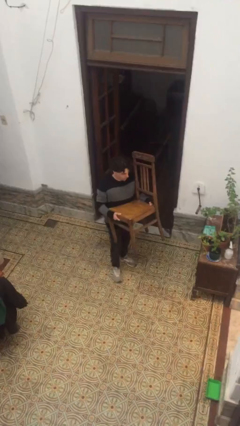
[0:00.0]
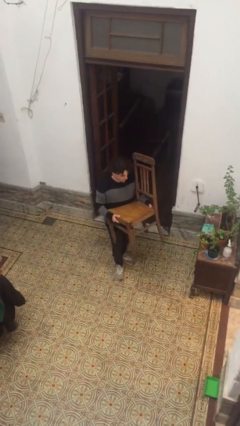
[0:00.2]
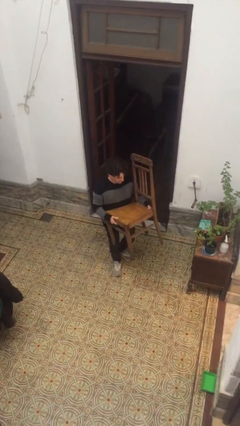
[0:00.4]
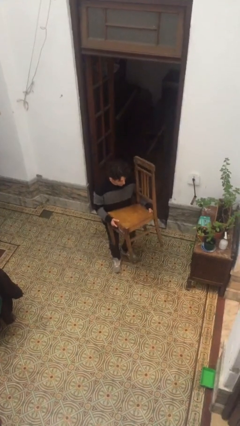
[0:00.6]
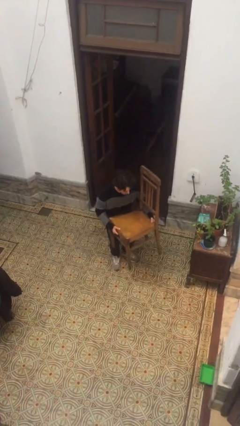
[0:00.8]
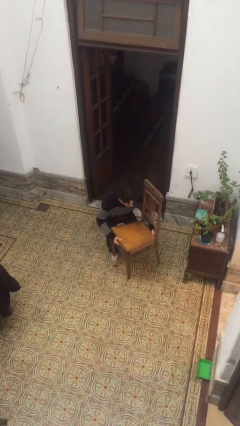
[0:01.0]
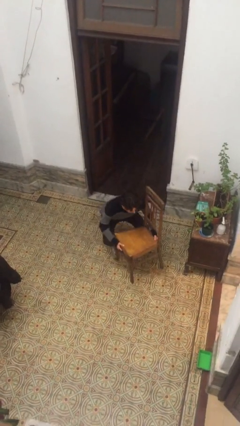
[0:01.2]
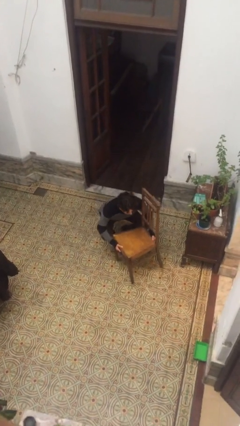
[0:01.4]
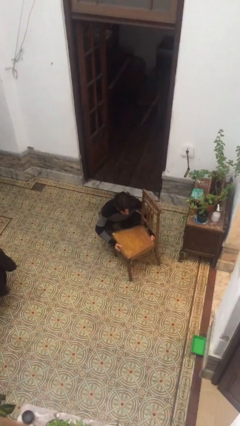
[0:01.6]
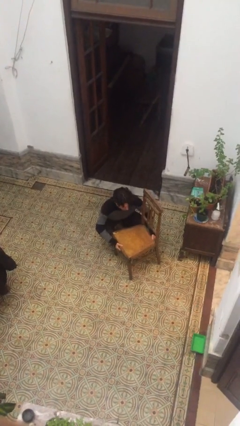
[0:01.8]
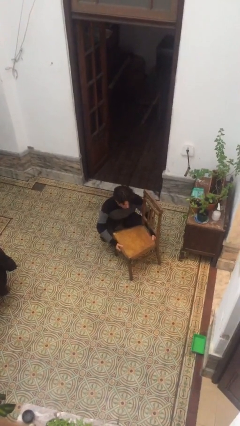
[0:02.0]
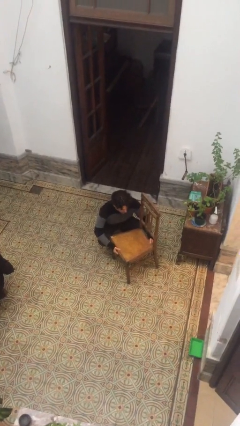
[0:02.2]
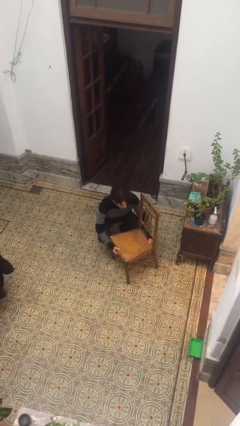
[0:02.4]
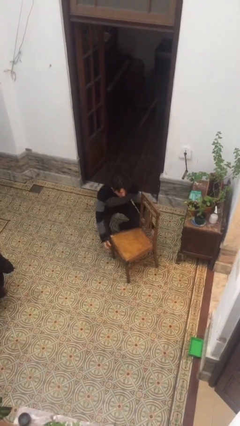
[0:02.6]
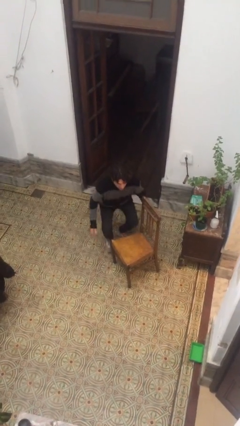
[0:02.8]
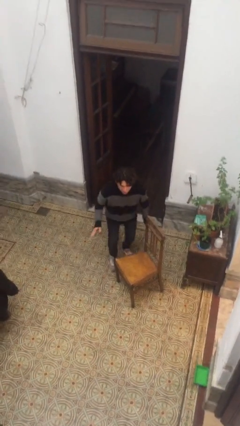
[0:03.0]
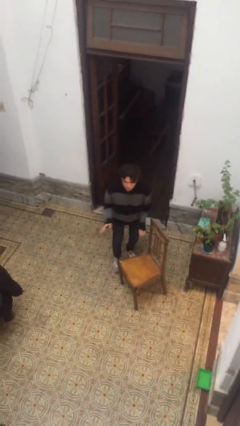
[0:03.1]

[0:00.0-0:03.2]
person puts down object on floor

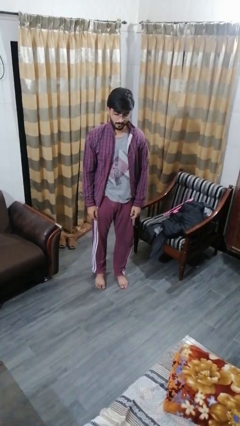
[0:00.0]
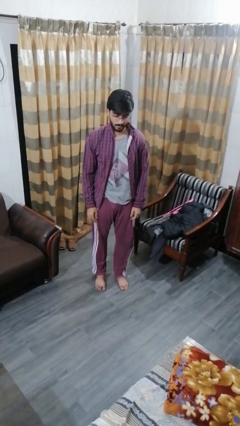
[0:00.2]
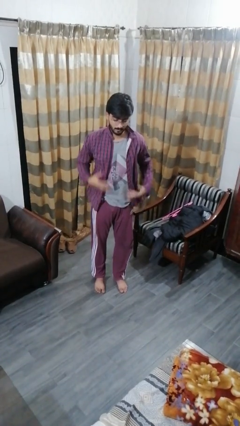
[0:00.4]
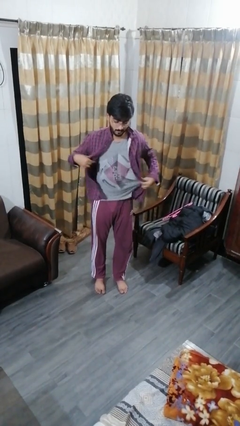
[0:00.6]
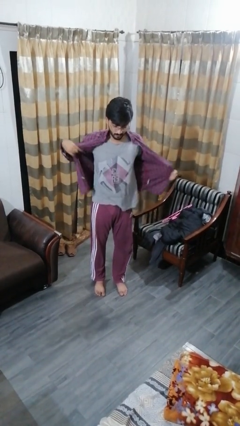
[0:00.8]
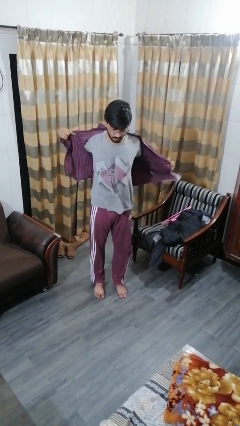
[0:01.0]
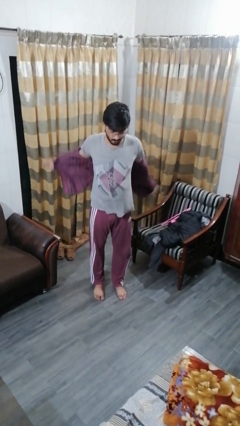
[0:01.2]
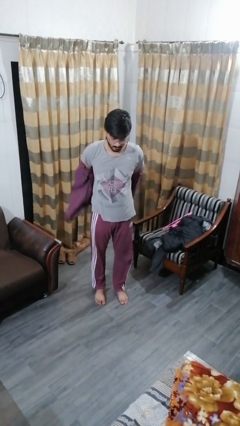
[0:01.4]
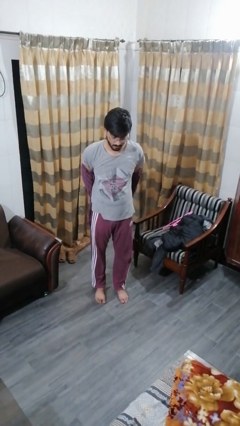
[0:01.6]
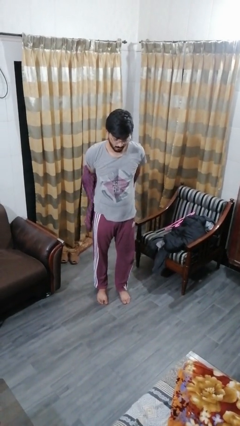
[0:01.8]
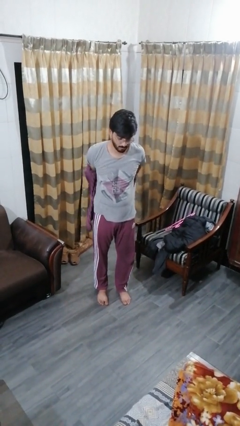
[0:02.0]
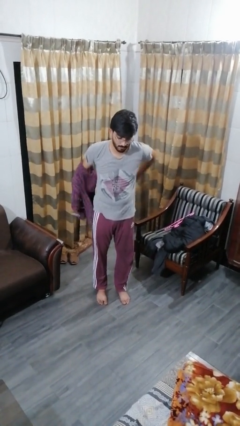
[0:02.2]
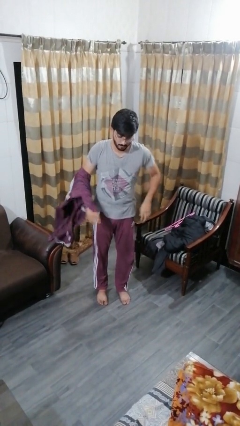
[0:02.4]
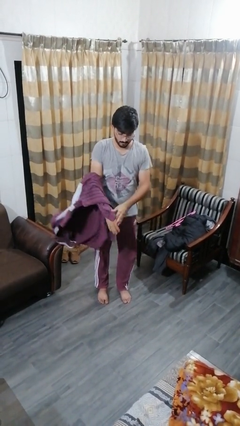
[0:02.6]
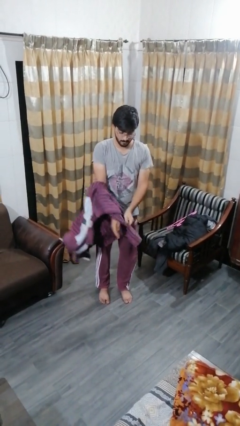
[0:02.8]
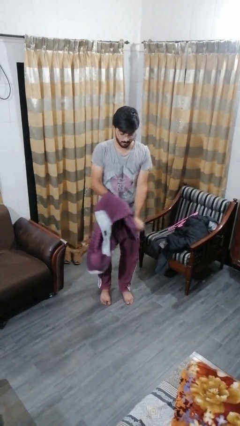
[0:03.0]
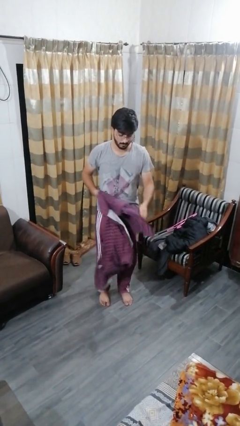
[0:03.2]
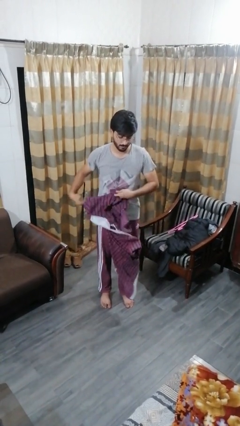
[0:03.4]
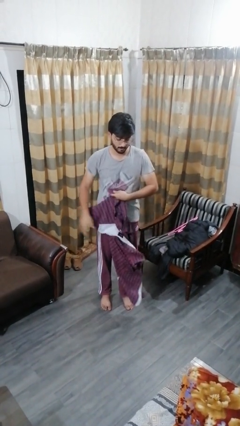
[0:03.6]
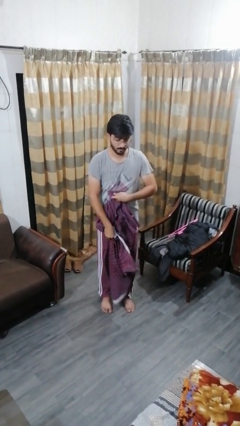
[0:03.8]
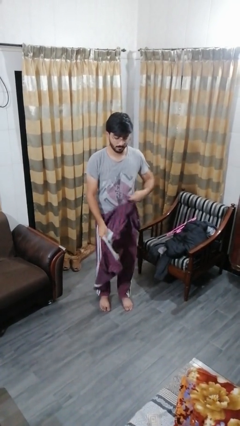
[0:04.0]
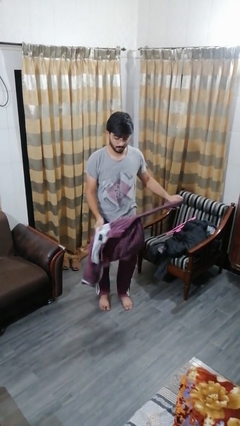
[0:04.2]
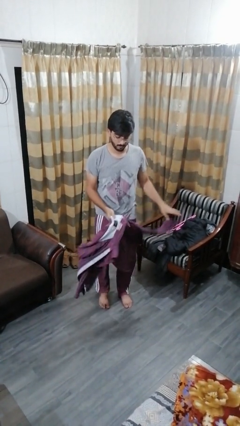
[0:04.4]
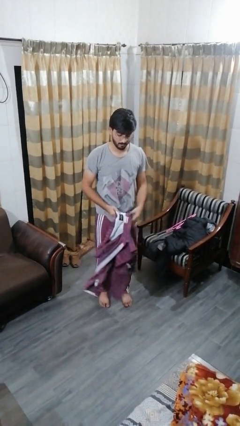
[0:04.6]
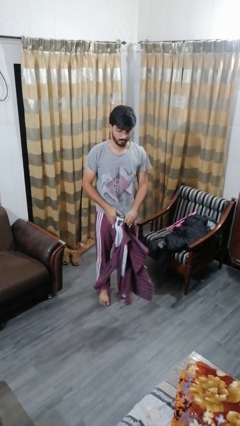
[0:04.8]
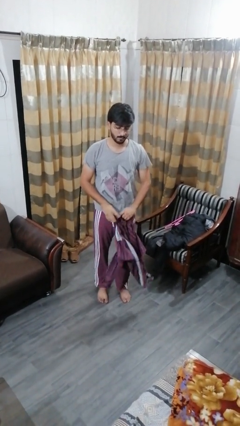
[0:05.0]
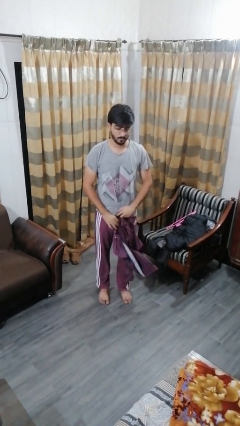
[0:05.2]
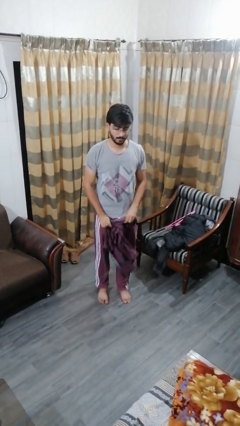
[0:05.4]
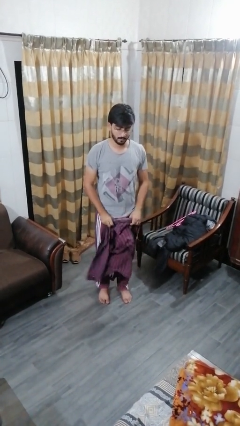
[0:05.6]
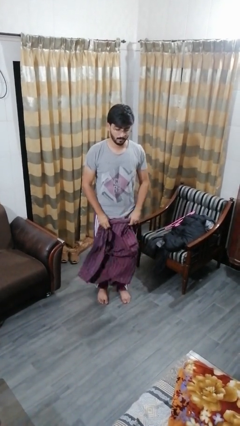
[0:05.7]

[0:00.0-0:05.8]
person takes off shirt

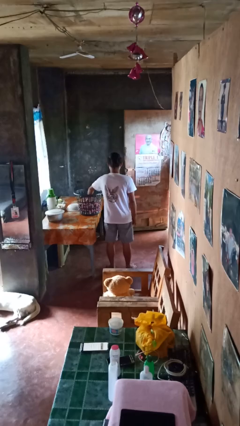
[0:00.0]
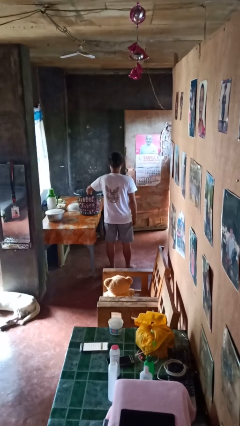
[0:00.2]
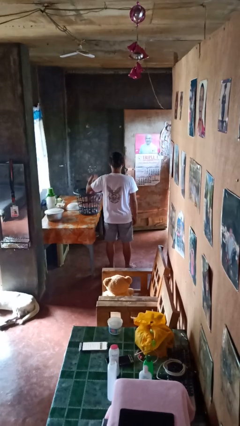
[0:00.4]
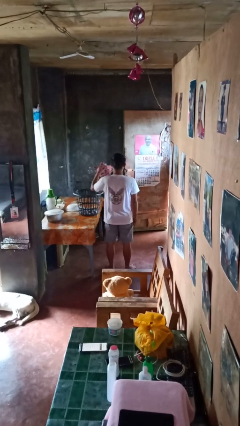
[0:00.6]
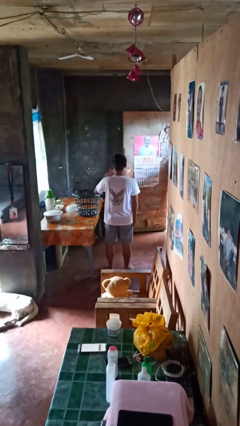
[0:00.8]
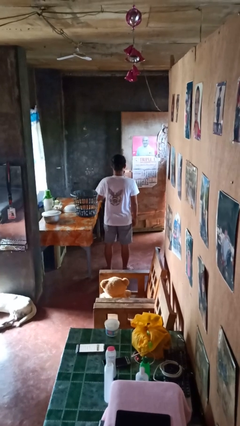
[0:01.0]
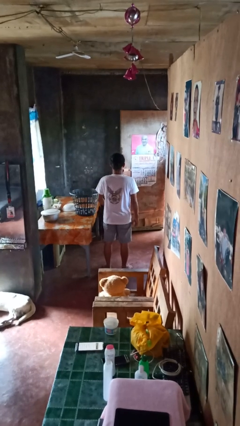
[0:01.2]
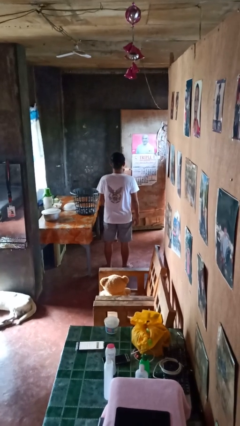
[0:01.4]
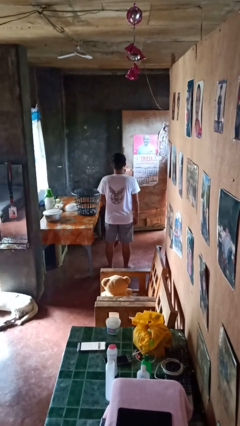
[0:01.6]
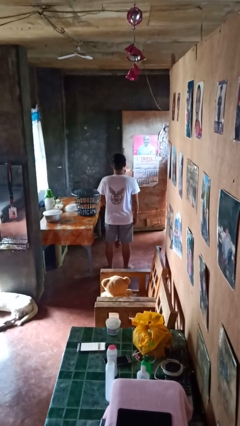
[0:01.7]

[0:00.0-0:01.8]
person takes object from basket

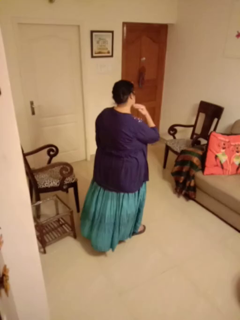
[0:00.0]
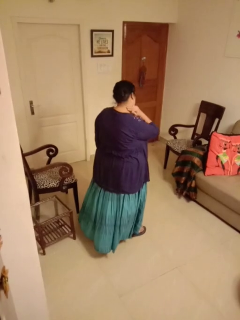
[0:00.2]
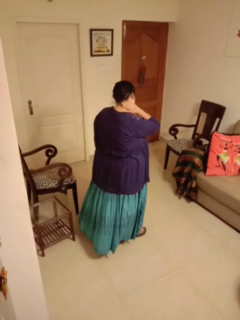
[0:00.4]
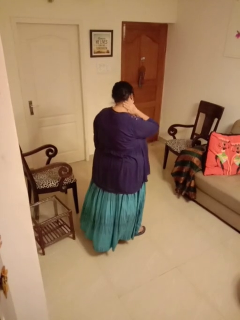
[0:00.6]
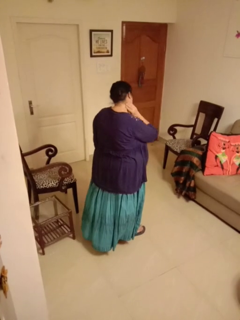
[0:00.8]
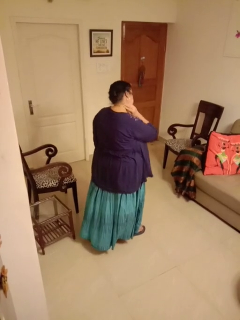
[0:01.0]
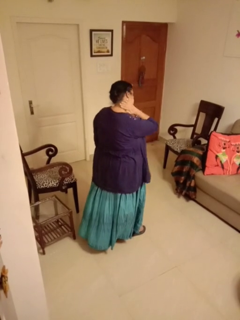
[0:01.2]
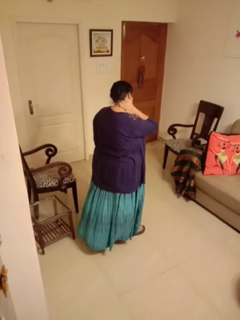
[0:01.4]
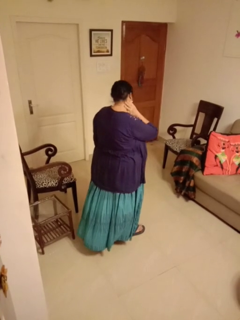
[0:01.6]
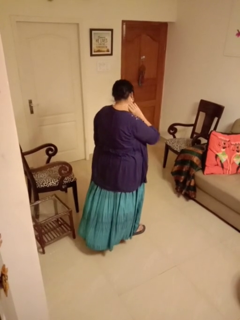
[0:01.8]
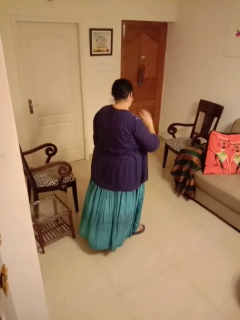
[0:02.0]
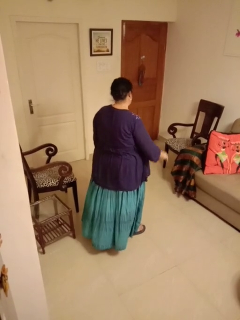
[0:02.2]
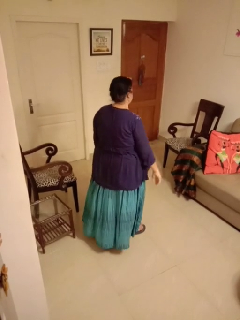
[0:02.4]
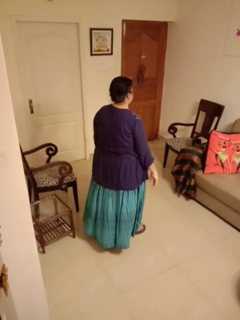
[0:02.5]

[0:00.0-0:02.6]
person rubs neck

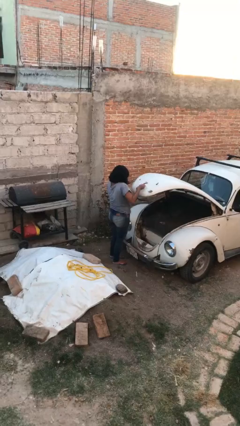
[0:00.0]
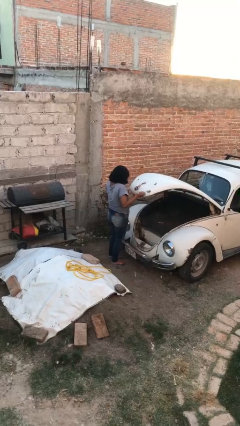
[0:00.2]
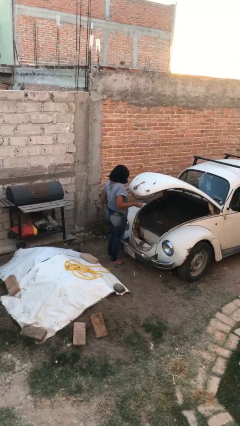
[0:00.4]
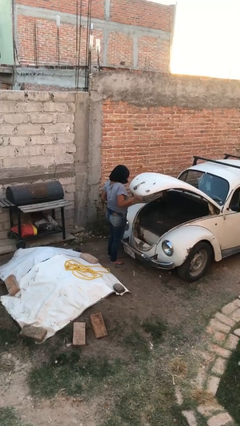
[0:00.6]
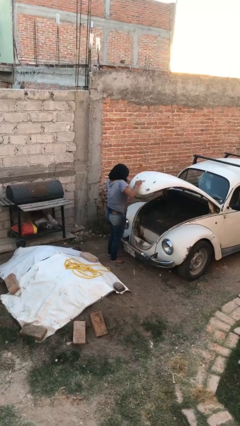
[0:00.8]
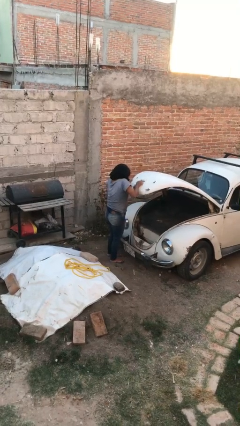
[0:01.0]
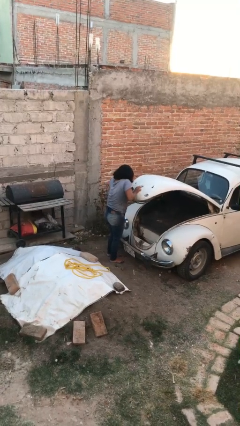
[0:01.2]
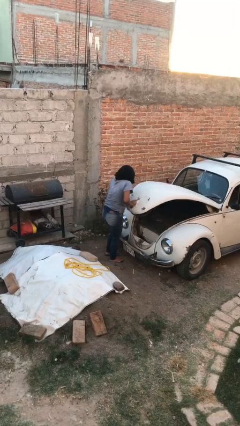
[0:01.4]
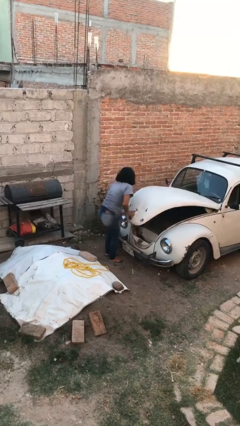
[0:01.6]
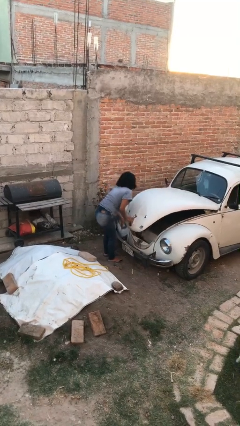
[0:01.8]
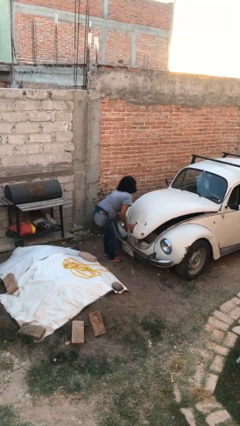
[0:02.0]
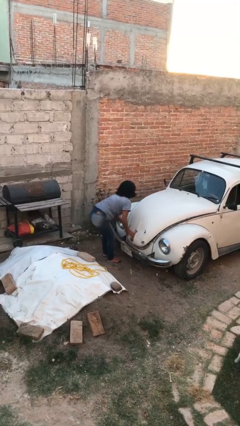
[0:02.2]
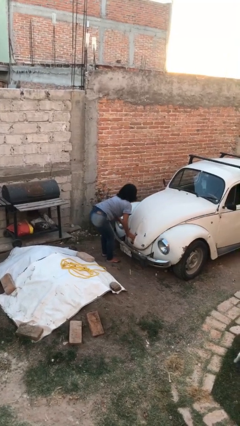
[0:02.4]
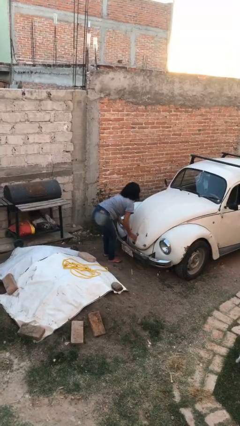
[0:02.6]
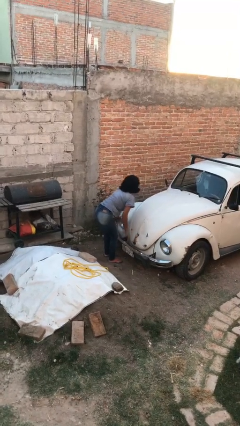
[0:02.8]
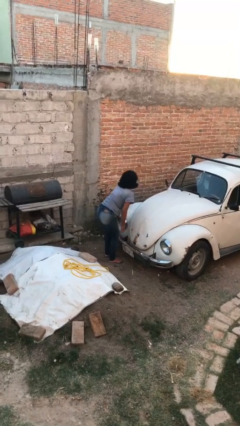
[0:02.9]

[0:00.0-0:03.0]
person closes car trunk

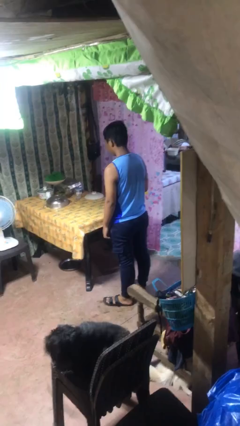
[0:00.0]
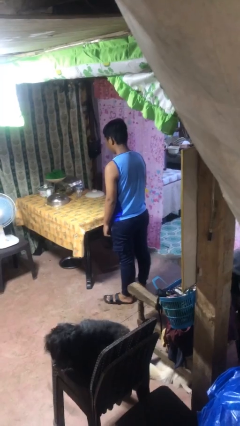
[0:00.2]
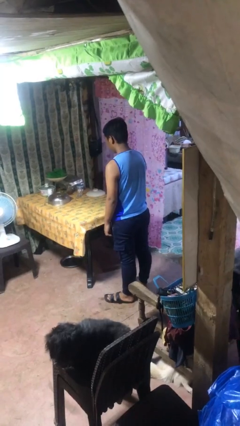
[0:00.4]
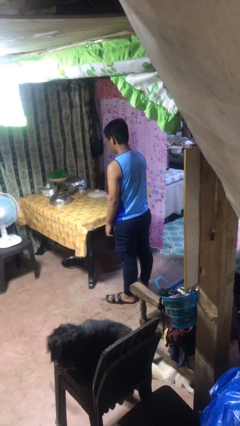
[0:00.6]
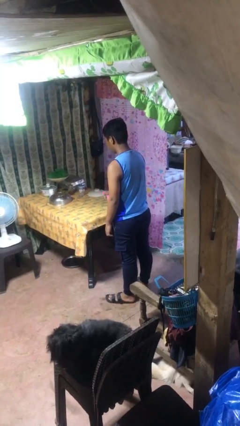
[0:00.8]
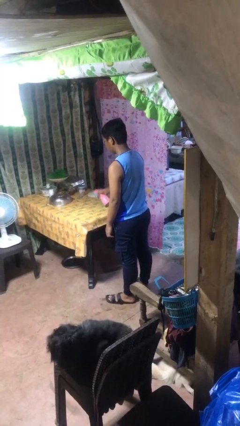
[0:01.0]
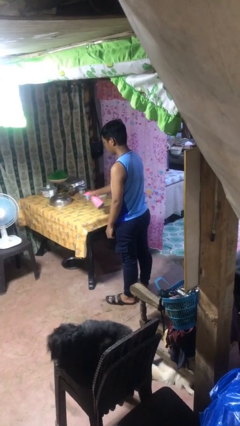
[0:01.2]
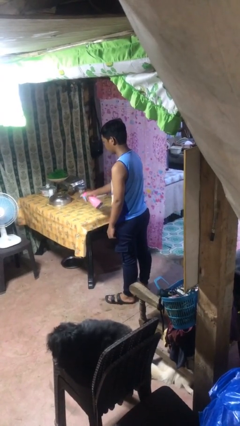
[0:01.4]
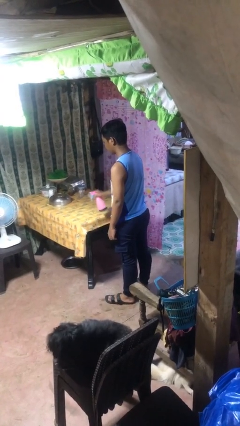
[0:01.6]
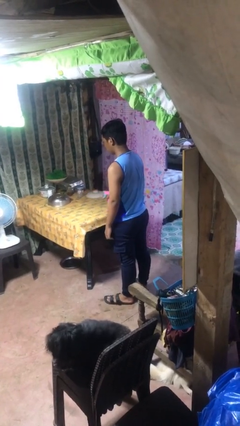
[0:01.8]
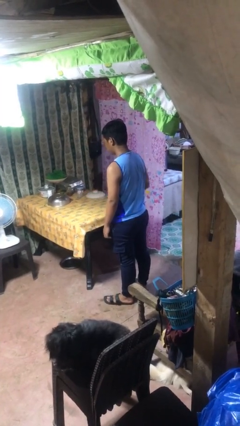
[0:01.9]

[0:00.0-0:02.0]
person sprays from bottle
